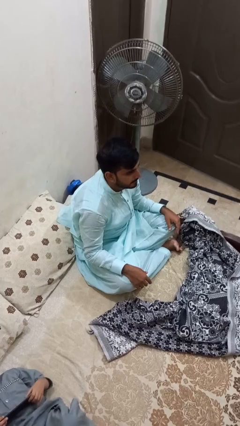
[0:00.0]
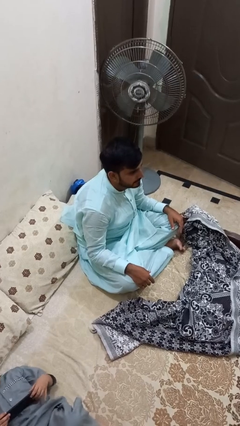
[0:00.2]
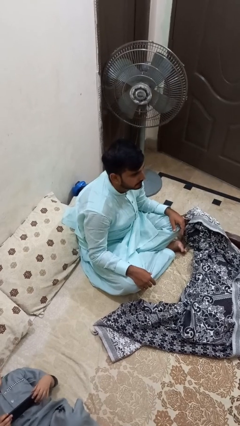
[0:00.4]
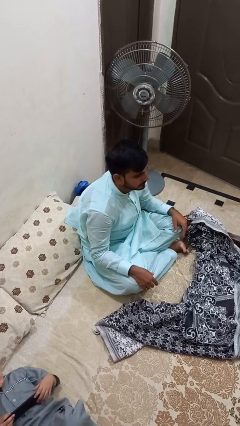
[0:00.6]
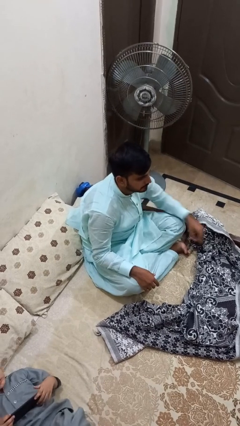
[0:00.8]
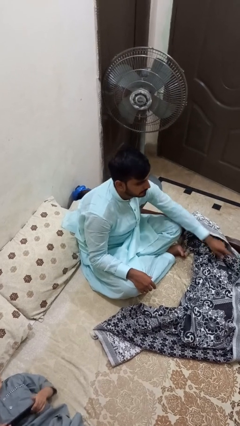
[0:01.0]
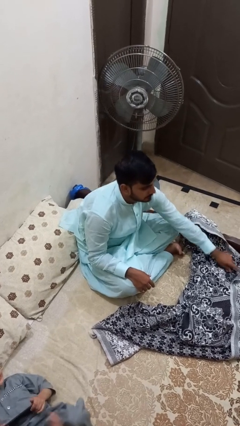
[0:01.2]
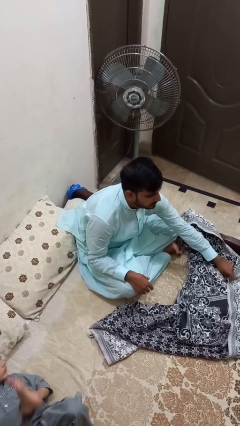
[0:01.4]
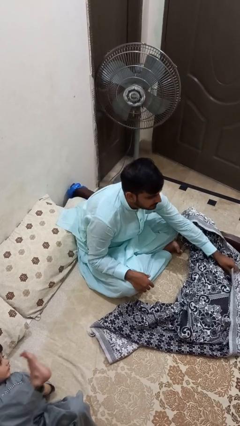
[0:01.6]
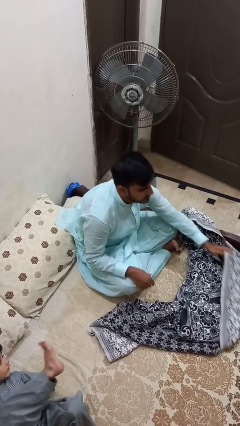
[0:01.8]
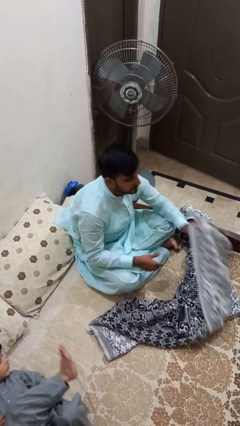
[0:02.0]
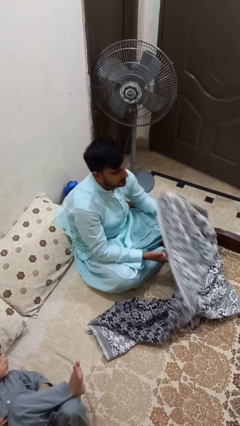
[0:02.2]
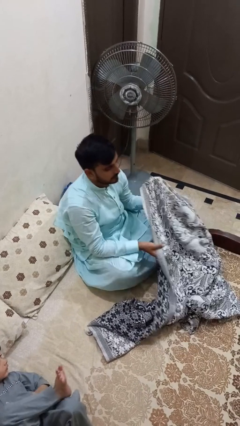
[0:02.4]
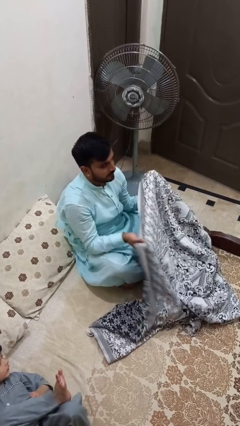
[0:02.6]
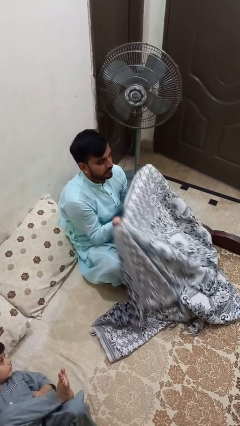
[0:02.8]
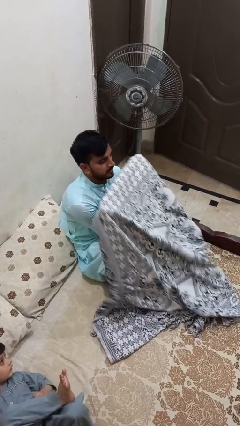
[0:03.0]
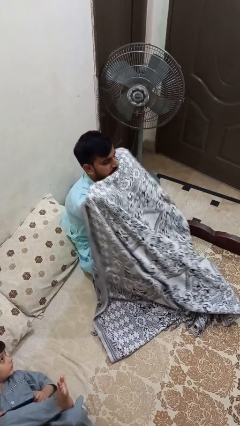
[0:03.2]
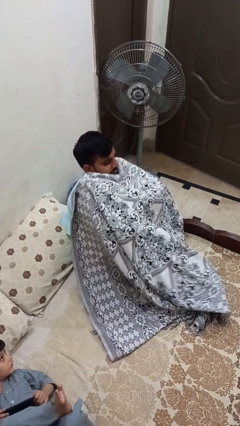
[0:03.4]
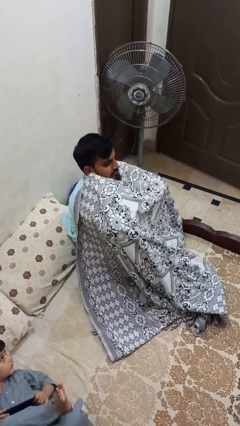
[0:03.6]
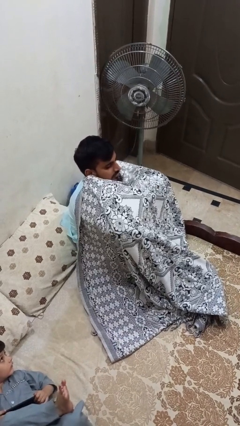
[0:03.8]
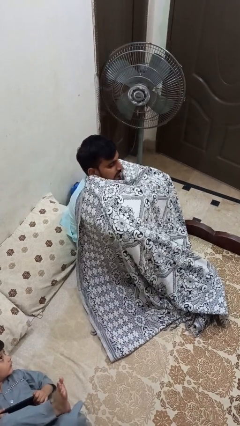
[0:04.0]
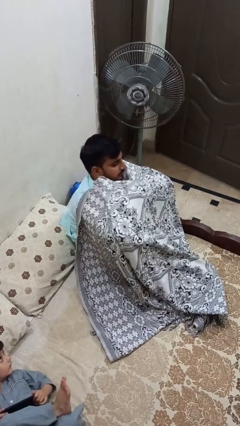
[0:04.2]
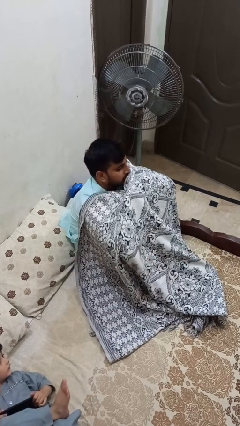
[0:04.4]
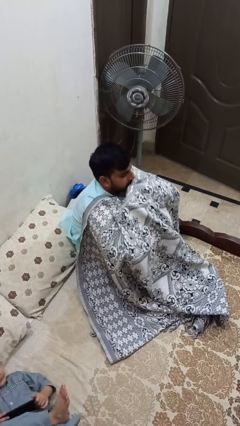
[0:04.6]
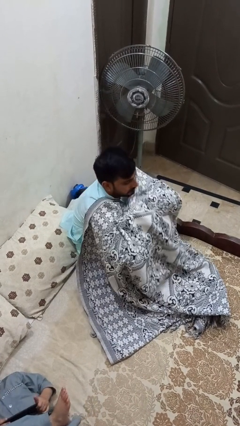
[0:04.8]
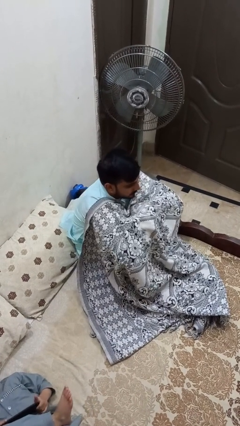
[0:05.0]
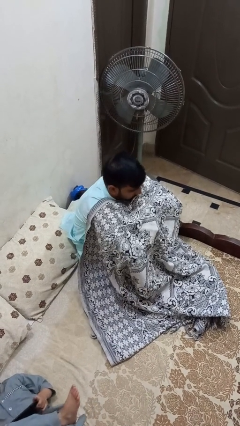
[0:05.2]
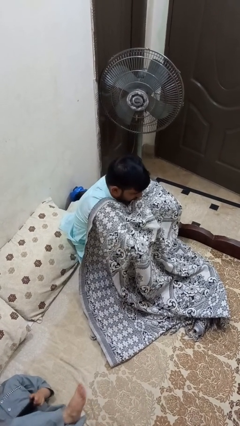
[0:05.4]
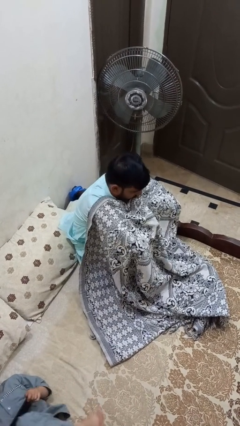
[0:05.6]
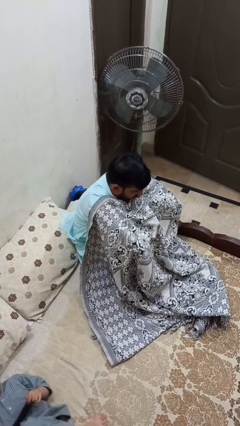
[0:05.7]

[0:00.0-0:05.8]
person covers with blanket

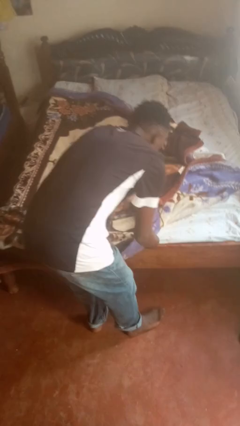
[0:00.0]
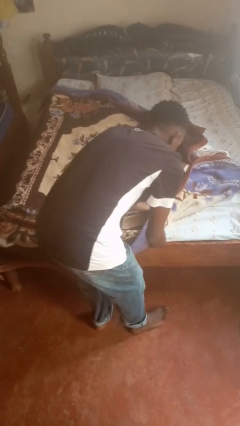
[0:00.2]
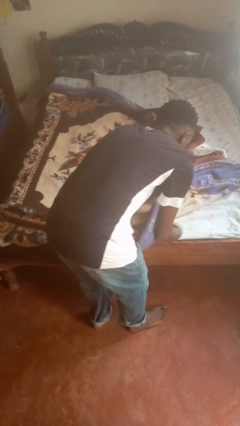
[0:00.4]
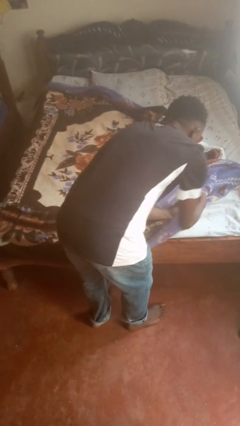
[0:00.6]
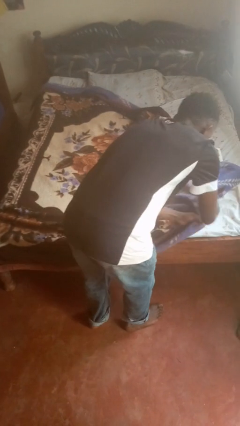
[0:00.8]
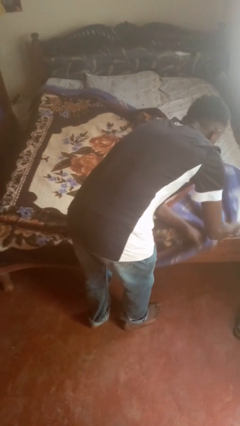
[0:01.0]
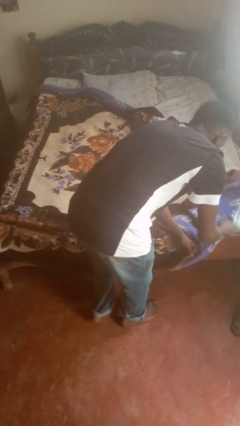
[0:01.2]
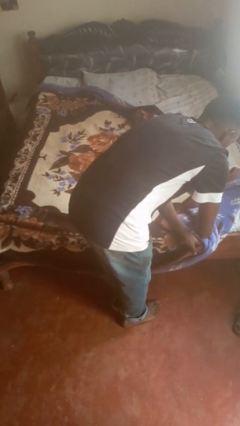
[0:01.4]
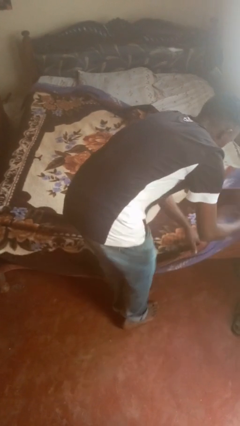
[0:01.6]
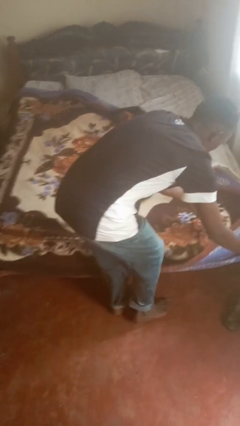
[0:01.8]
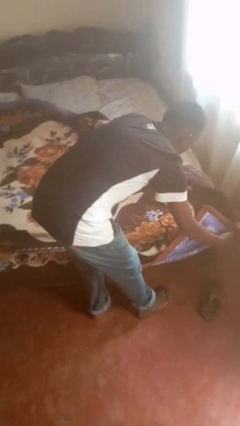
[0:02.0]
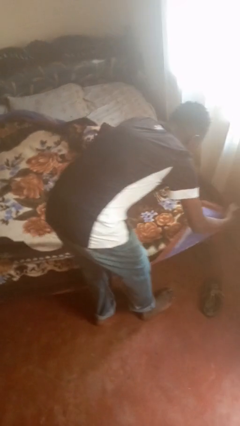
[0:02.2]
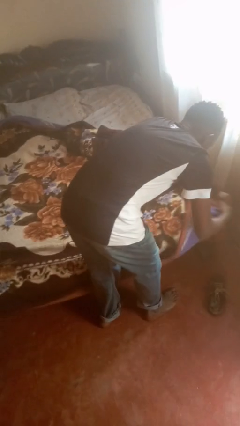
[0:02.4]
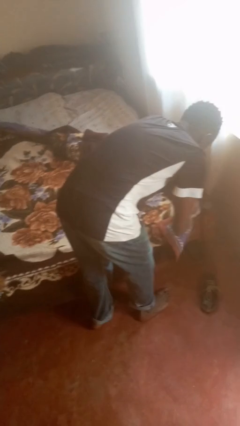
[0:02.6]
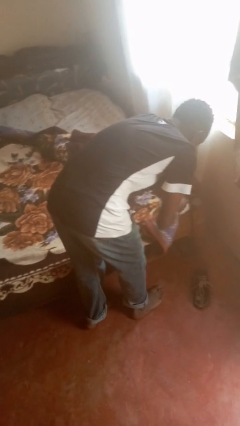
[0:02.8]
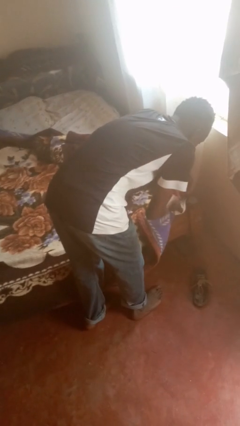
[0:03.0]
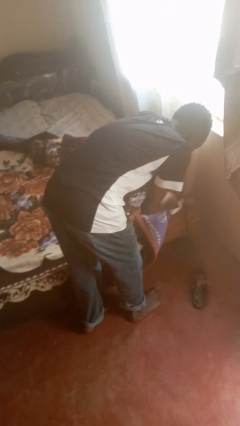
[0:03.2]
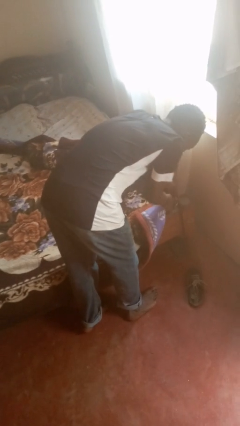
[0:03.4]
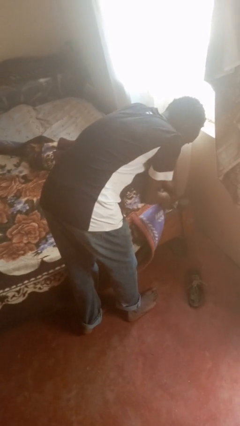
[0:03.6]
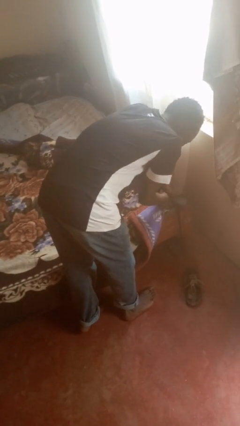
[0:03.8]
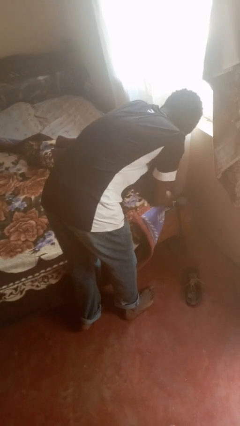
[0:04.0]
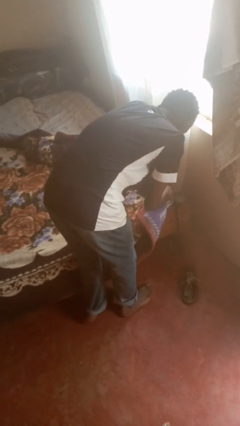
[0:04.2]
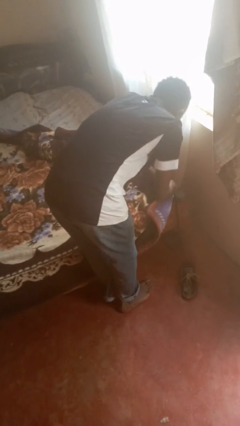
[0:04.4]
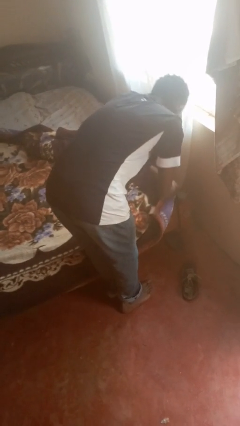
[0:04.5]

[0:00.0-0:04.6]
person makes bed

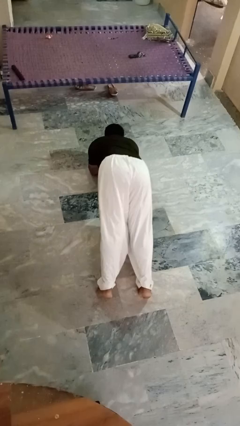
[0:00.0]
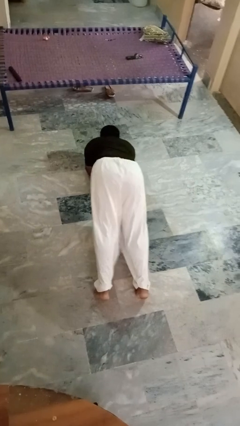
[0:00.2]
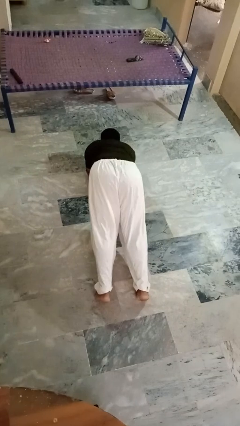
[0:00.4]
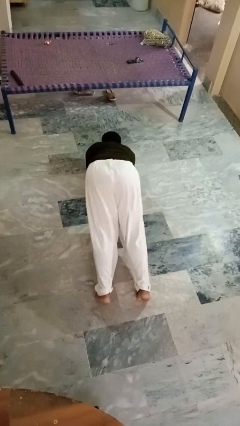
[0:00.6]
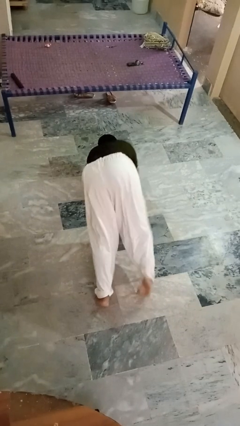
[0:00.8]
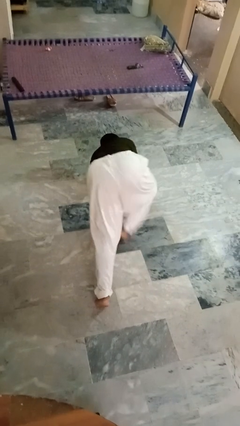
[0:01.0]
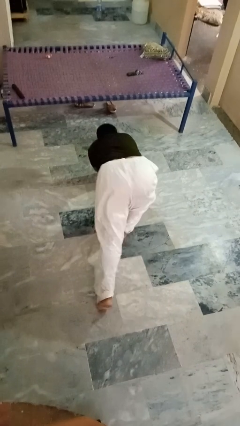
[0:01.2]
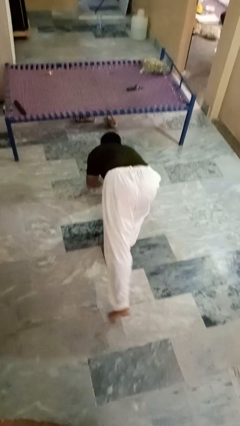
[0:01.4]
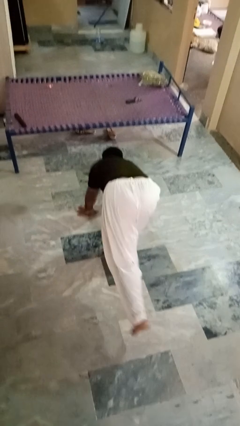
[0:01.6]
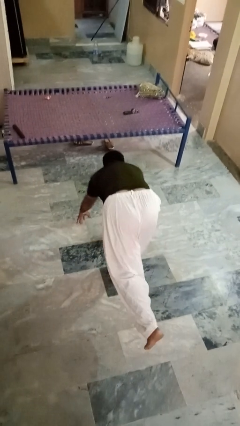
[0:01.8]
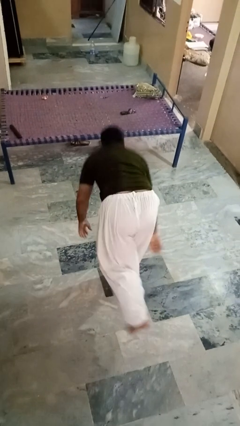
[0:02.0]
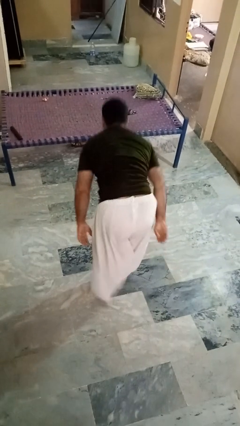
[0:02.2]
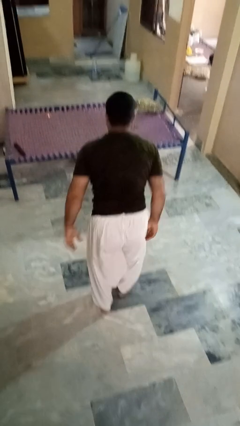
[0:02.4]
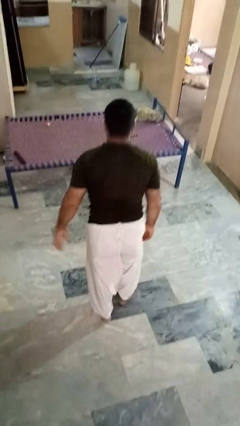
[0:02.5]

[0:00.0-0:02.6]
person stands up from floor

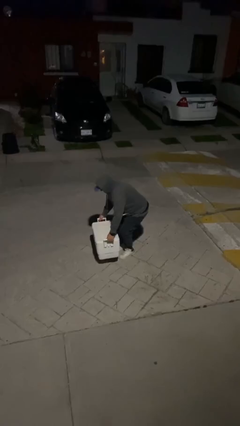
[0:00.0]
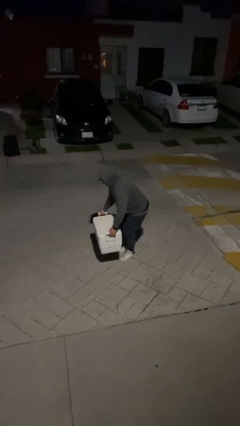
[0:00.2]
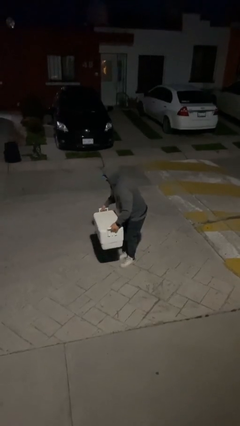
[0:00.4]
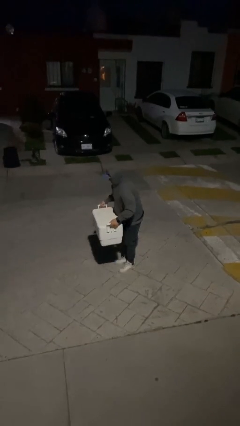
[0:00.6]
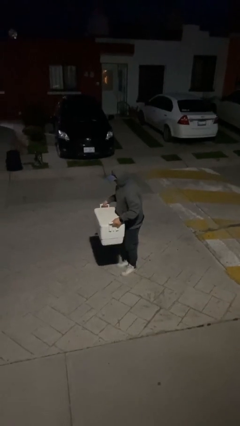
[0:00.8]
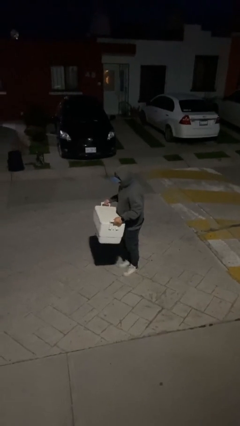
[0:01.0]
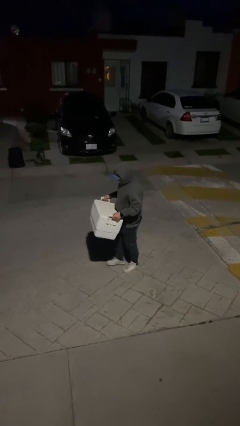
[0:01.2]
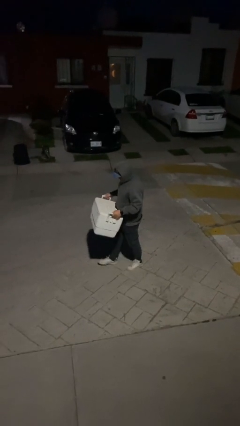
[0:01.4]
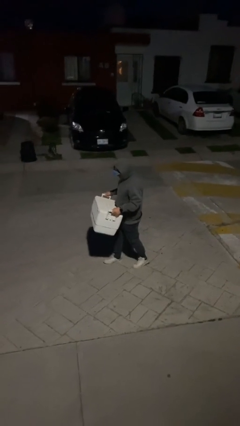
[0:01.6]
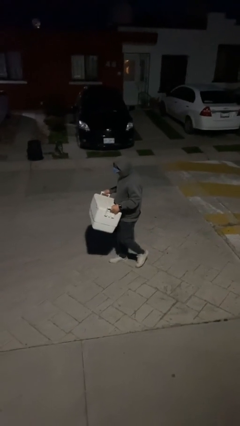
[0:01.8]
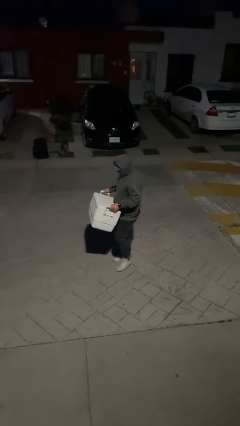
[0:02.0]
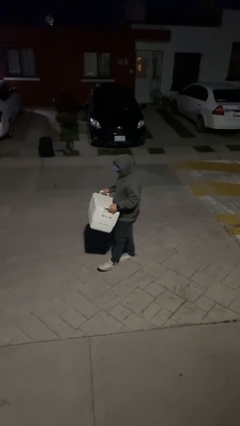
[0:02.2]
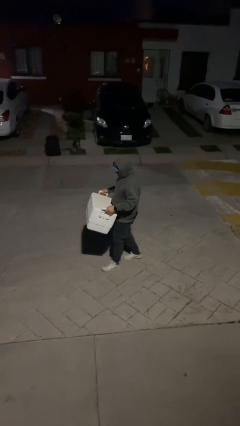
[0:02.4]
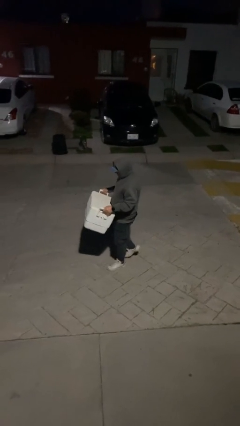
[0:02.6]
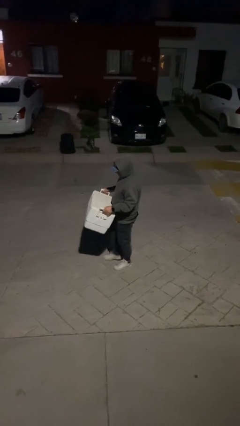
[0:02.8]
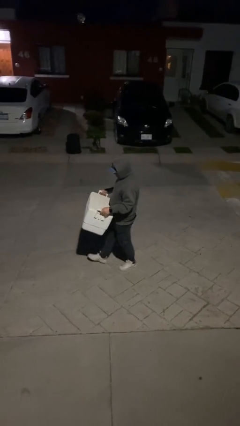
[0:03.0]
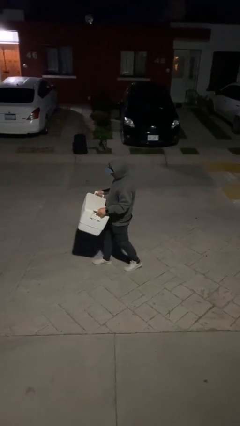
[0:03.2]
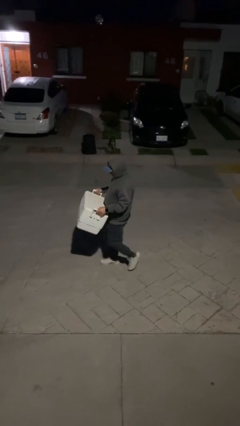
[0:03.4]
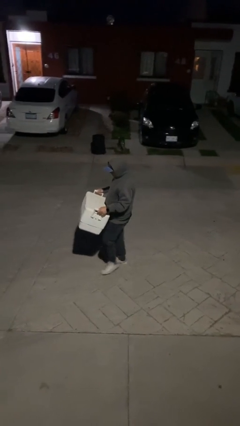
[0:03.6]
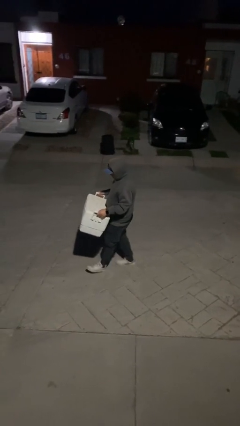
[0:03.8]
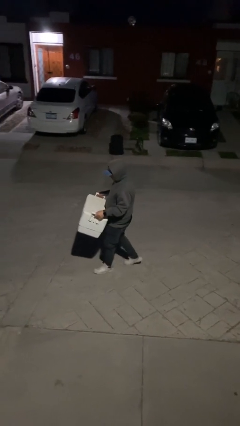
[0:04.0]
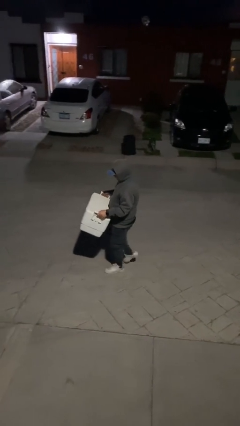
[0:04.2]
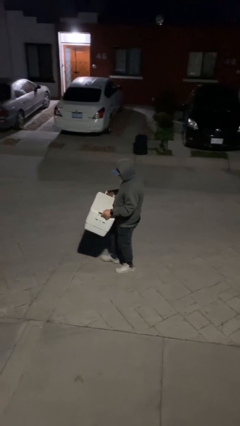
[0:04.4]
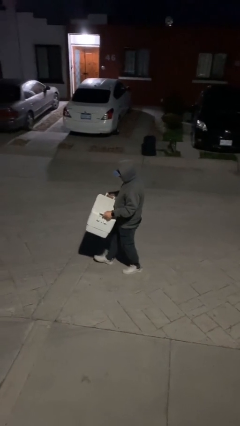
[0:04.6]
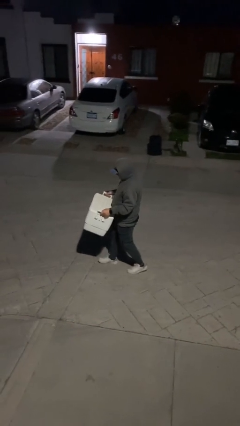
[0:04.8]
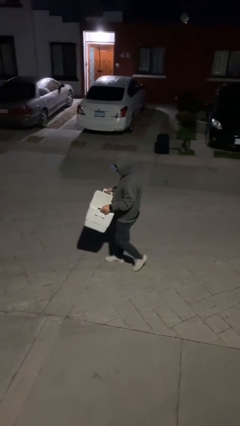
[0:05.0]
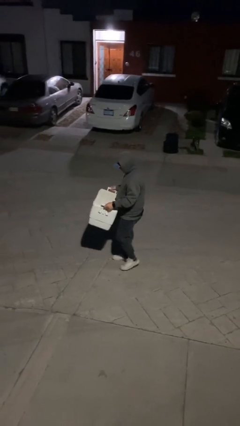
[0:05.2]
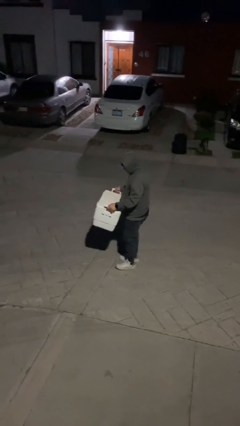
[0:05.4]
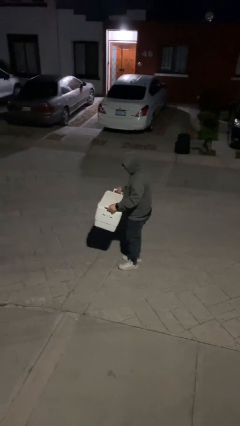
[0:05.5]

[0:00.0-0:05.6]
person carries heavy object
